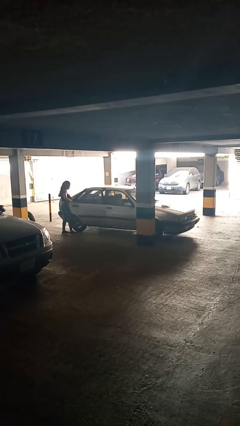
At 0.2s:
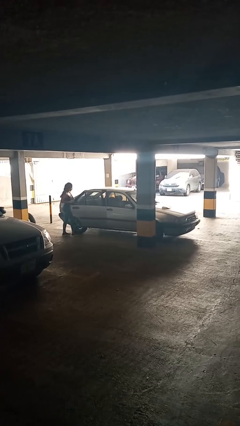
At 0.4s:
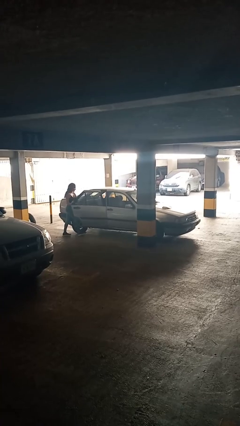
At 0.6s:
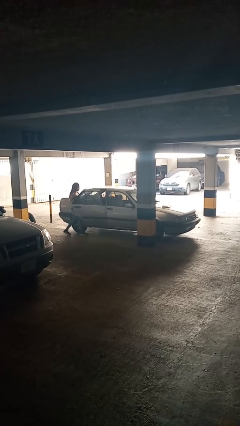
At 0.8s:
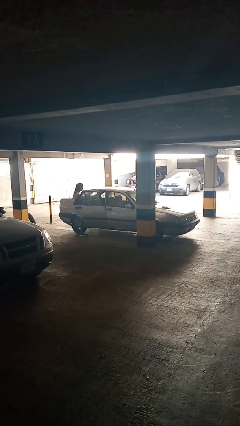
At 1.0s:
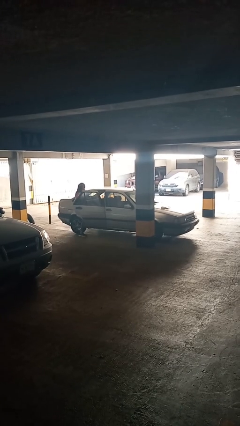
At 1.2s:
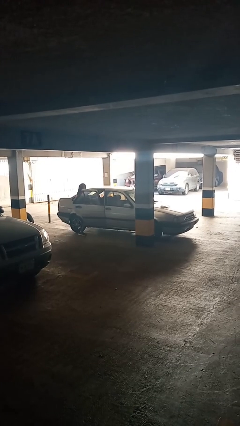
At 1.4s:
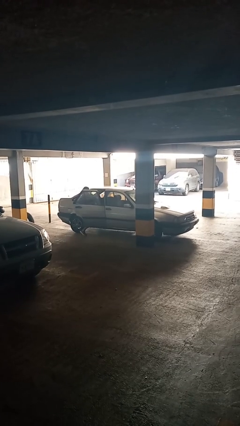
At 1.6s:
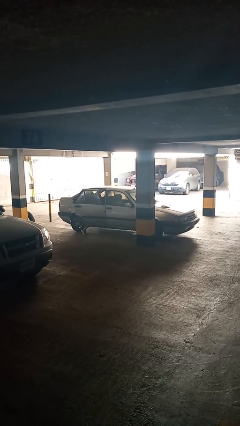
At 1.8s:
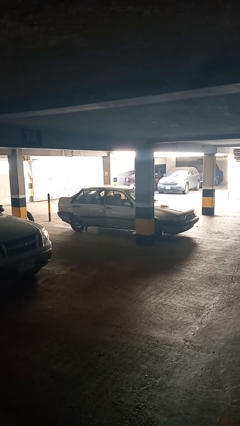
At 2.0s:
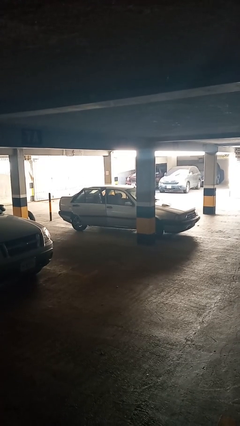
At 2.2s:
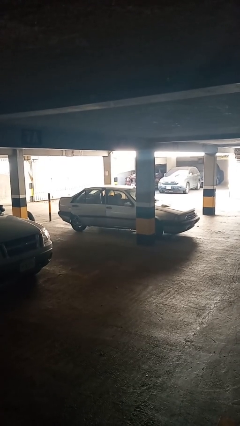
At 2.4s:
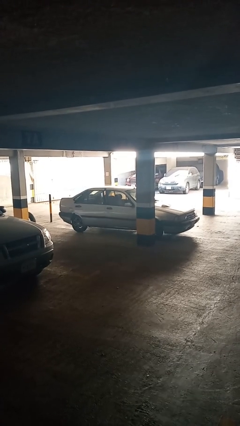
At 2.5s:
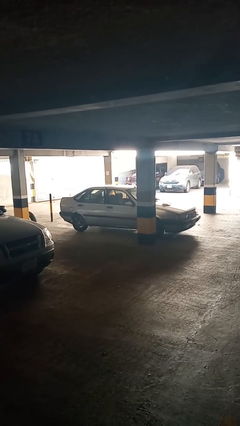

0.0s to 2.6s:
car picks up person

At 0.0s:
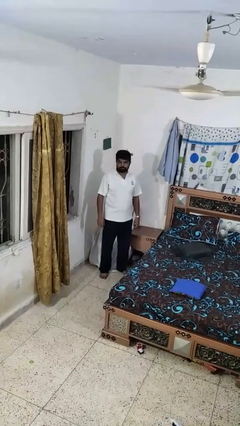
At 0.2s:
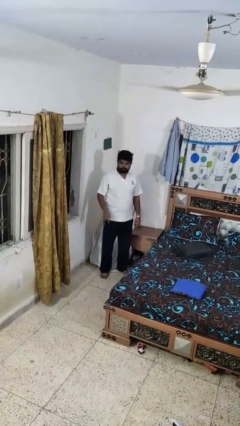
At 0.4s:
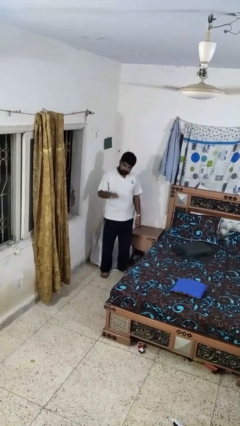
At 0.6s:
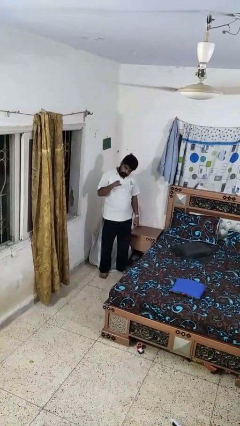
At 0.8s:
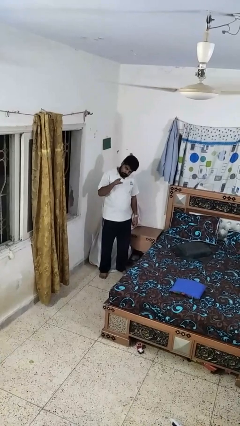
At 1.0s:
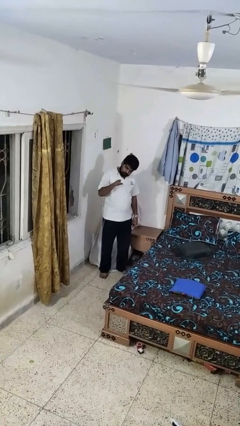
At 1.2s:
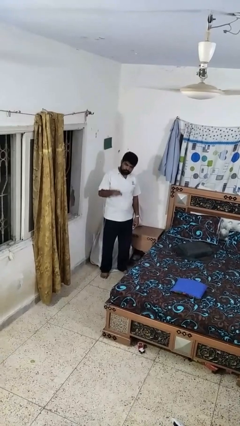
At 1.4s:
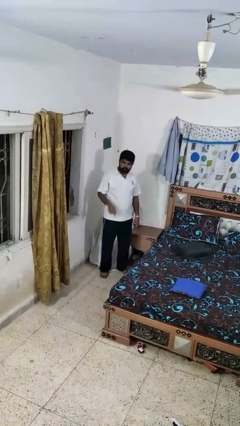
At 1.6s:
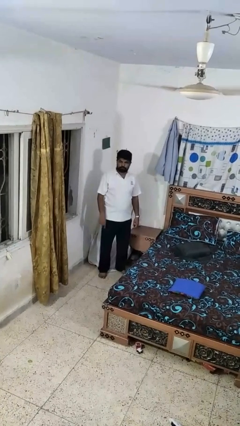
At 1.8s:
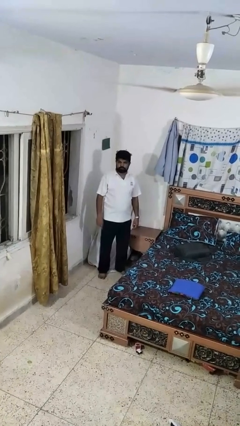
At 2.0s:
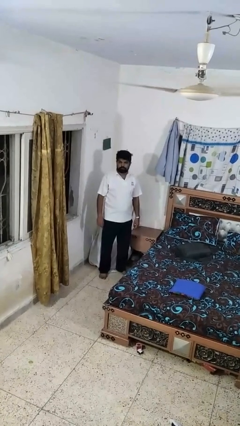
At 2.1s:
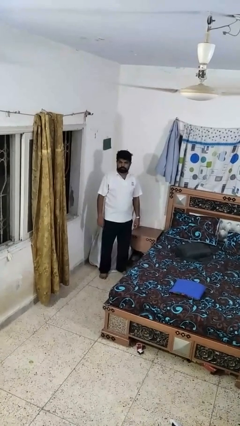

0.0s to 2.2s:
person points at person

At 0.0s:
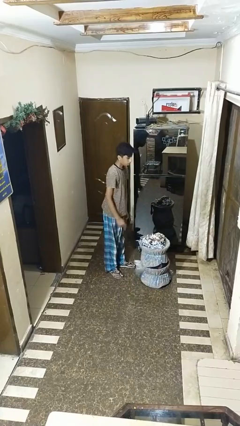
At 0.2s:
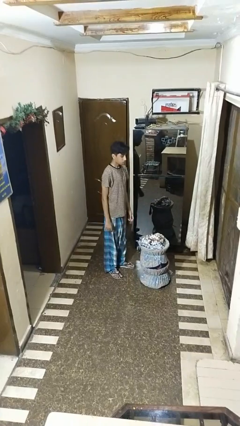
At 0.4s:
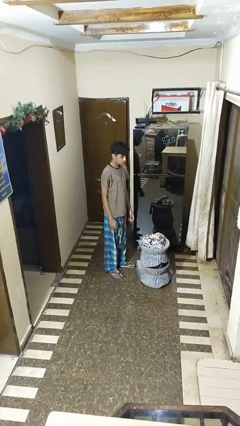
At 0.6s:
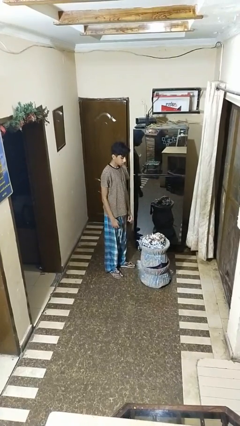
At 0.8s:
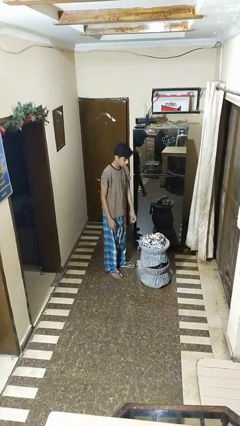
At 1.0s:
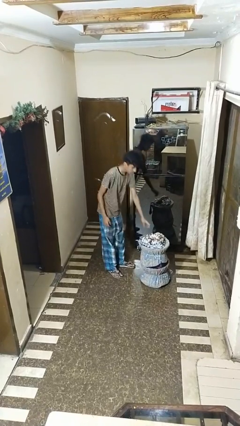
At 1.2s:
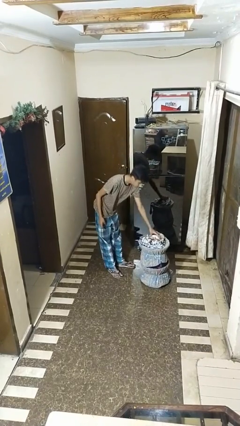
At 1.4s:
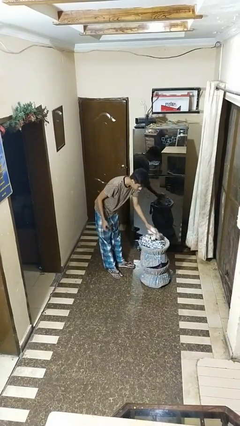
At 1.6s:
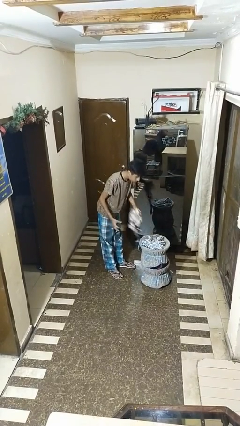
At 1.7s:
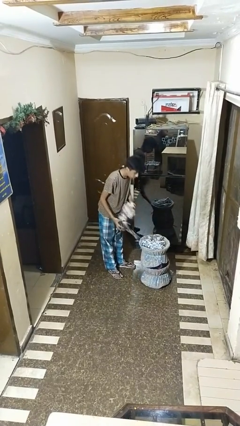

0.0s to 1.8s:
person takes object from basket

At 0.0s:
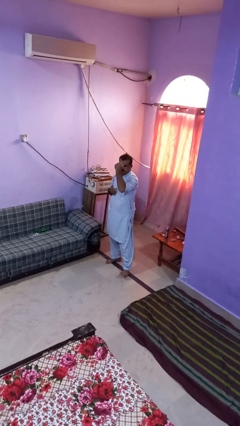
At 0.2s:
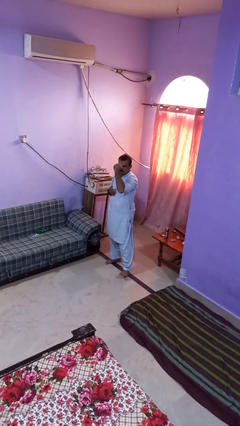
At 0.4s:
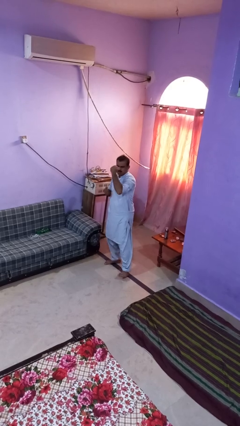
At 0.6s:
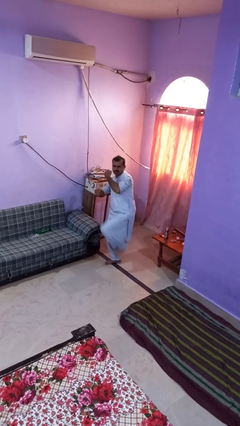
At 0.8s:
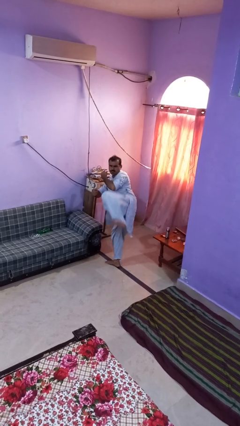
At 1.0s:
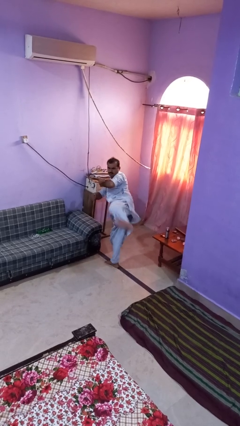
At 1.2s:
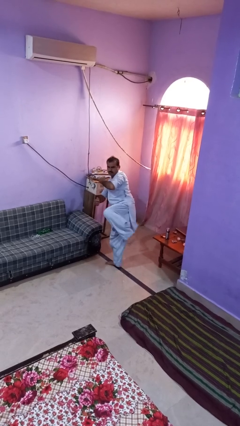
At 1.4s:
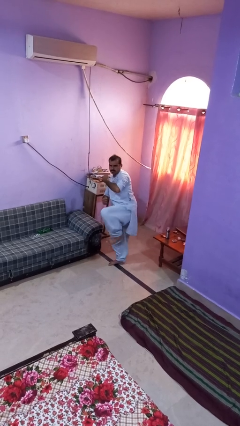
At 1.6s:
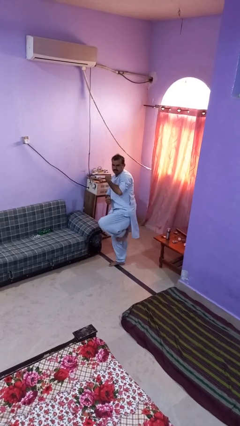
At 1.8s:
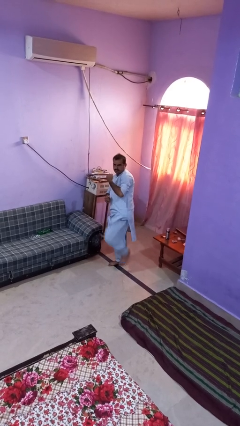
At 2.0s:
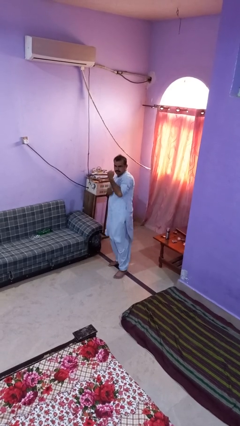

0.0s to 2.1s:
person karate kicks

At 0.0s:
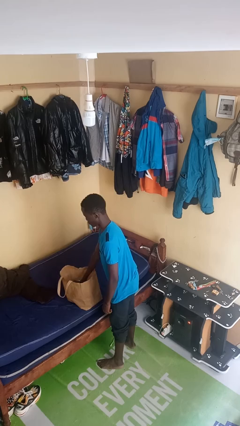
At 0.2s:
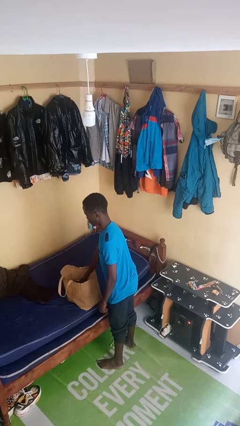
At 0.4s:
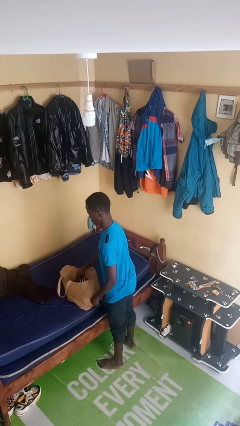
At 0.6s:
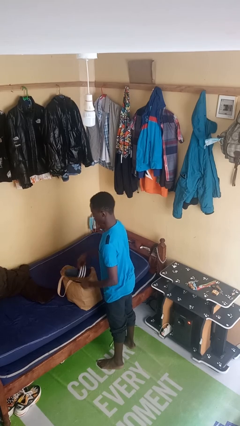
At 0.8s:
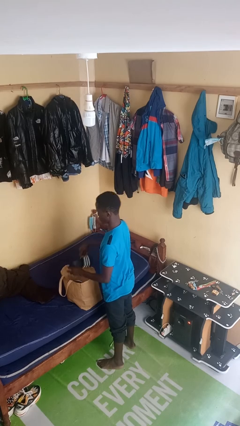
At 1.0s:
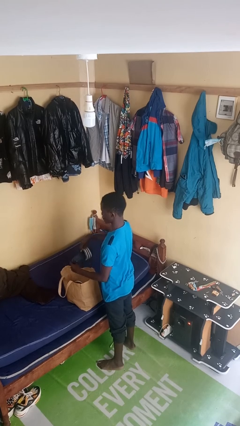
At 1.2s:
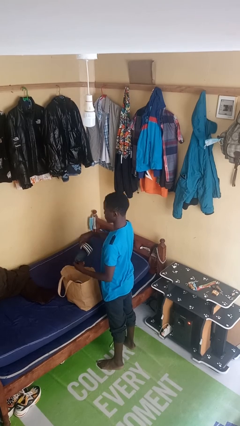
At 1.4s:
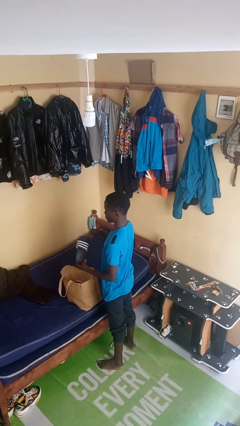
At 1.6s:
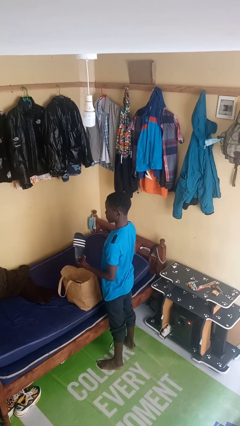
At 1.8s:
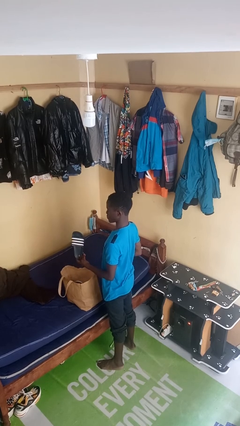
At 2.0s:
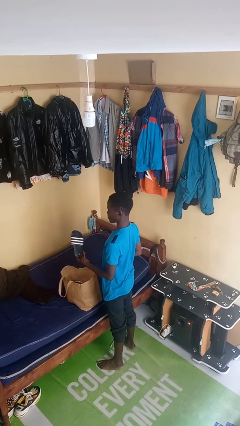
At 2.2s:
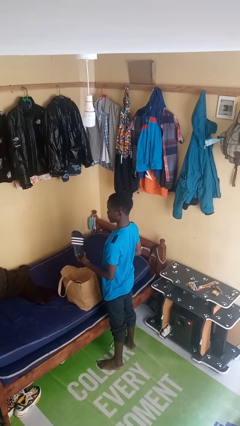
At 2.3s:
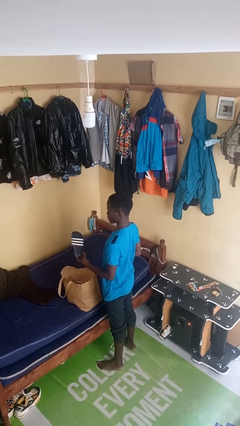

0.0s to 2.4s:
person takes object from bag

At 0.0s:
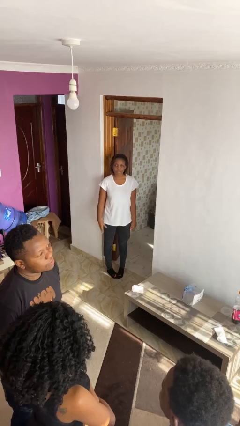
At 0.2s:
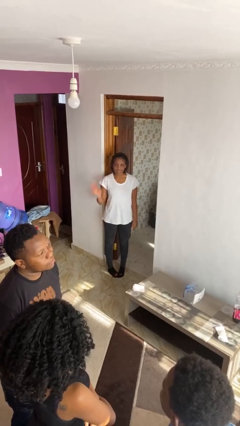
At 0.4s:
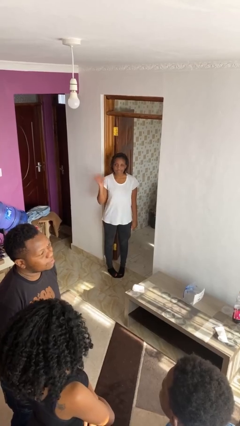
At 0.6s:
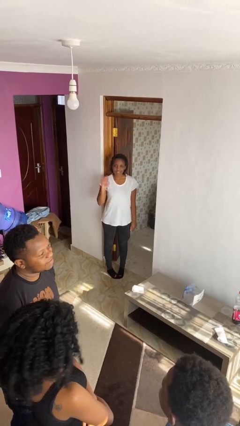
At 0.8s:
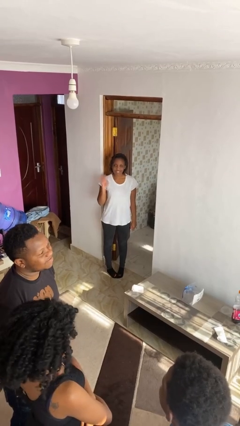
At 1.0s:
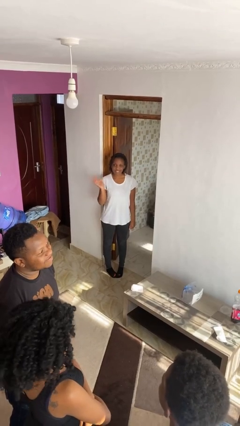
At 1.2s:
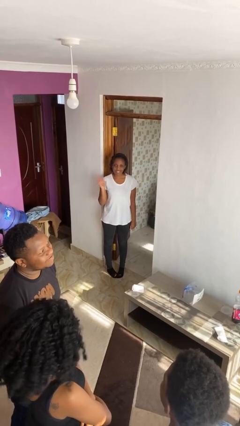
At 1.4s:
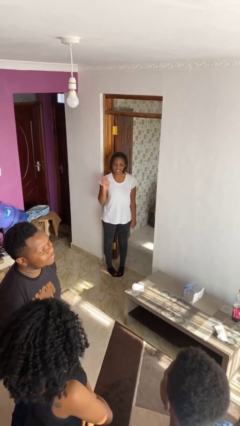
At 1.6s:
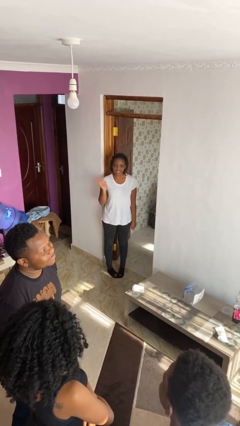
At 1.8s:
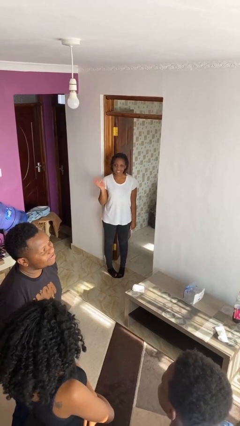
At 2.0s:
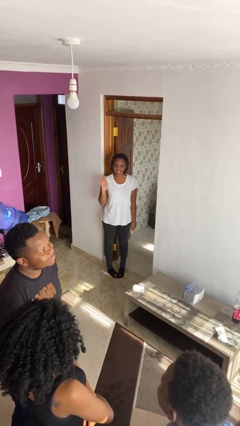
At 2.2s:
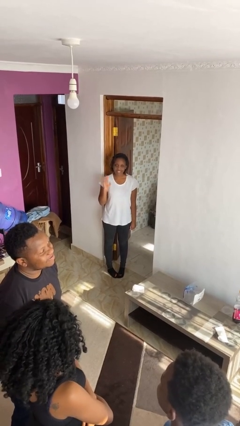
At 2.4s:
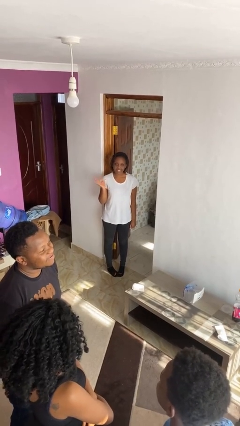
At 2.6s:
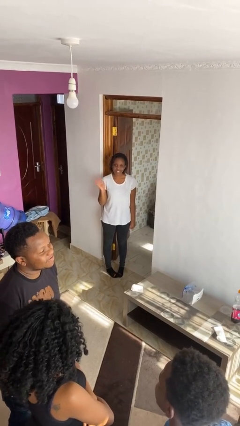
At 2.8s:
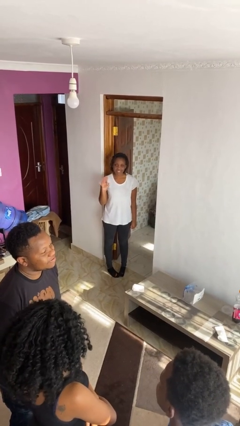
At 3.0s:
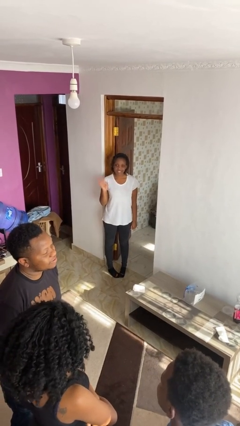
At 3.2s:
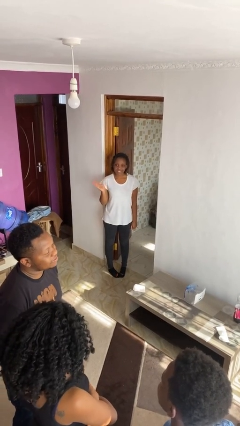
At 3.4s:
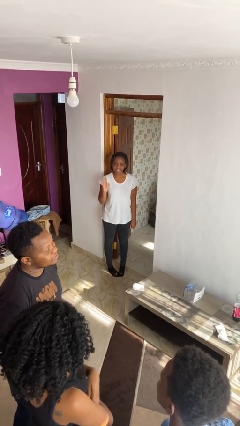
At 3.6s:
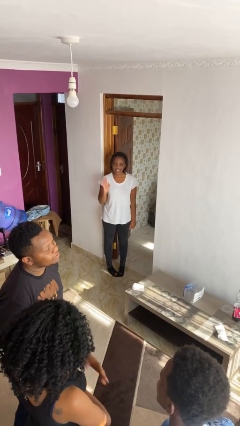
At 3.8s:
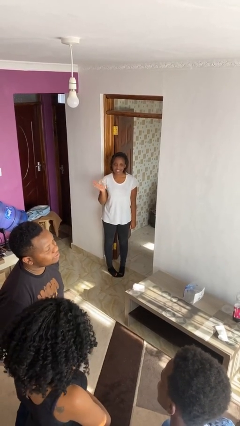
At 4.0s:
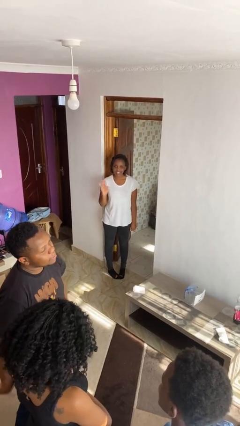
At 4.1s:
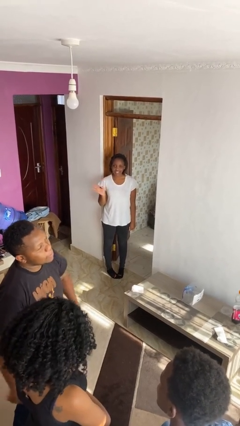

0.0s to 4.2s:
person waves at person

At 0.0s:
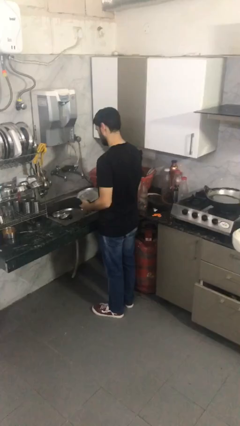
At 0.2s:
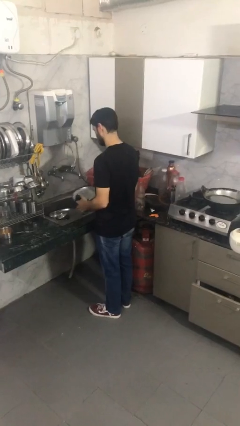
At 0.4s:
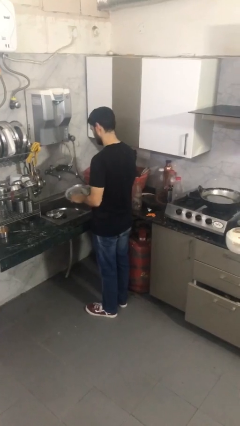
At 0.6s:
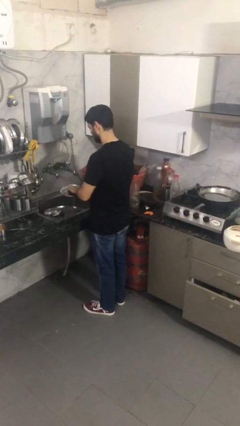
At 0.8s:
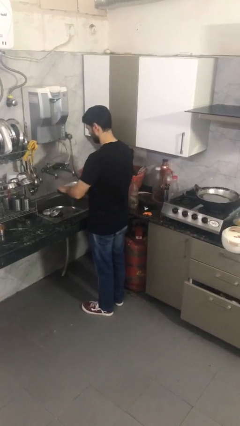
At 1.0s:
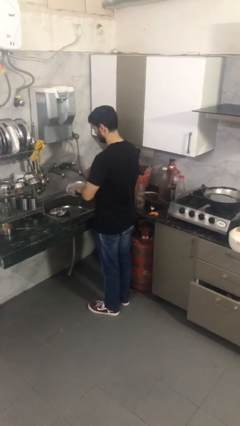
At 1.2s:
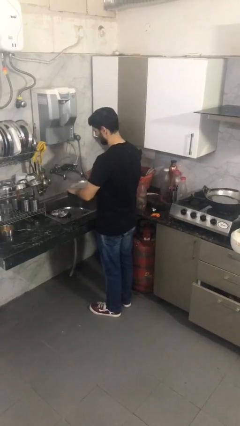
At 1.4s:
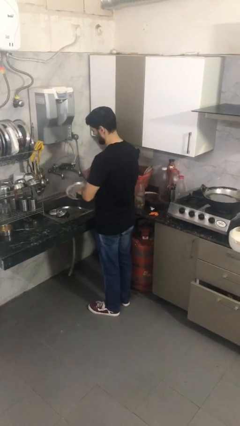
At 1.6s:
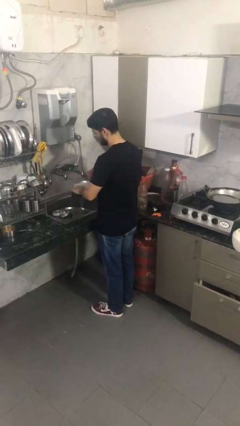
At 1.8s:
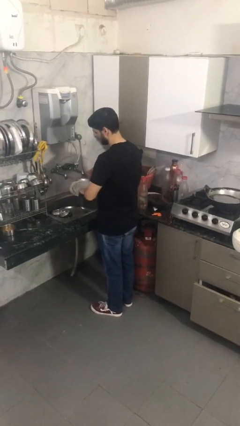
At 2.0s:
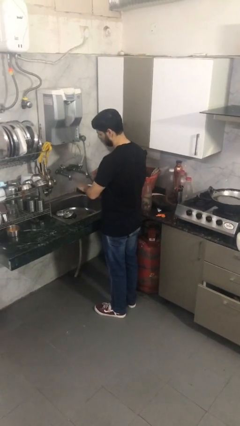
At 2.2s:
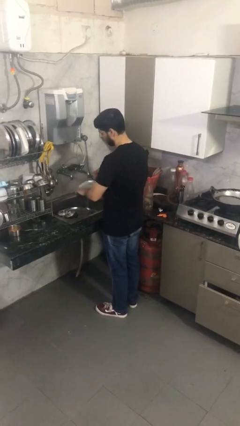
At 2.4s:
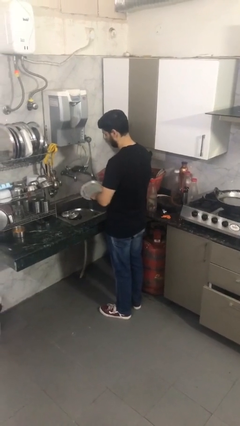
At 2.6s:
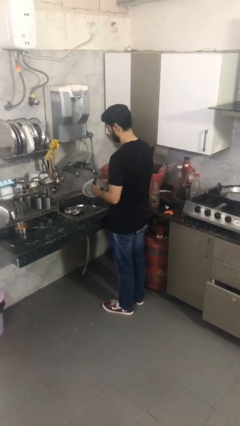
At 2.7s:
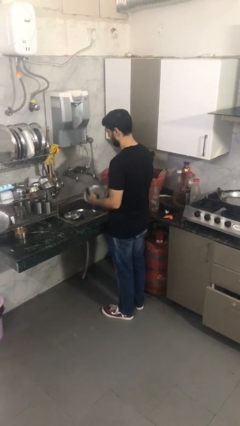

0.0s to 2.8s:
person washes dish
